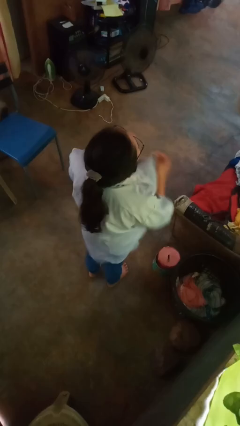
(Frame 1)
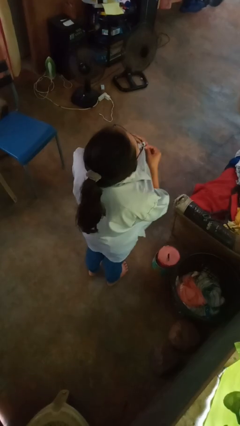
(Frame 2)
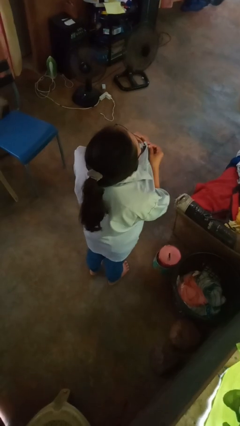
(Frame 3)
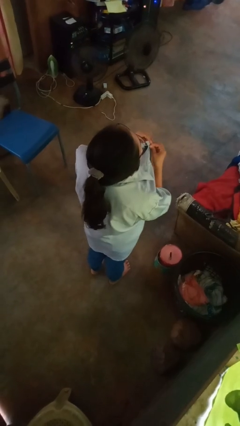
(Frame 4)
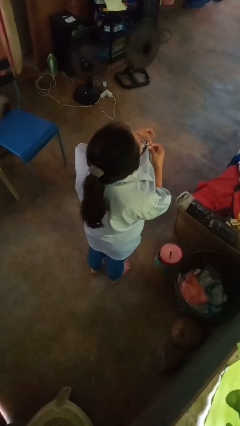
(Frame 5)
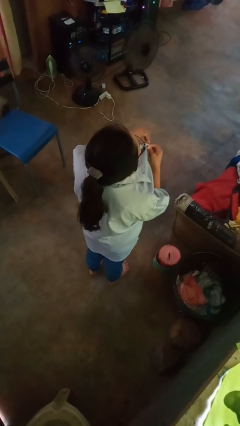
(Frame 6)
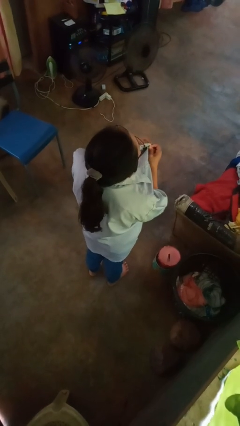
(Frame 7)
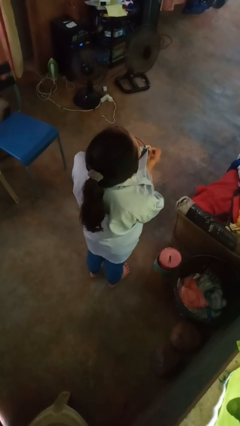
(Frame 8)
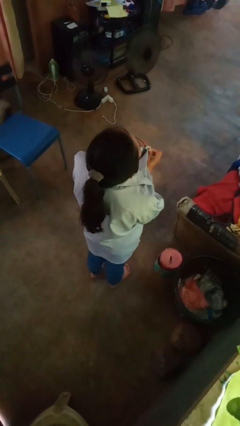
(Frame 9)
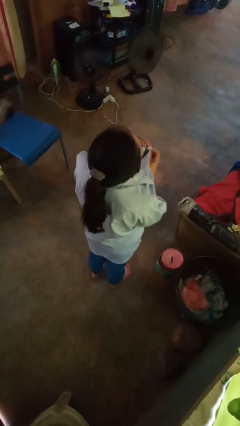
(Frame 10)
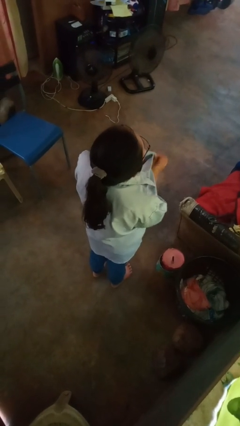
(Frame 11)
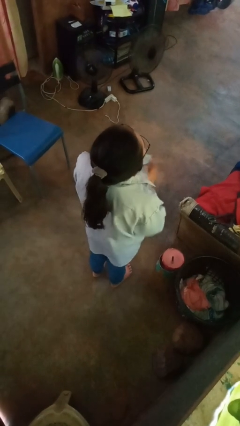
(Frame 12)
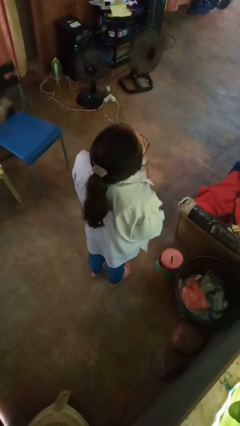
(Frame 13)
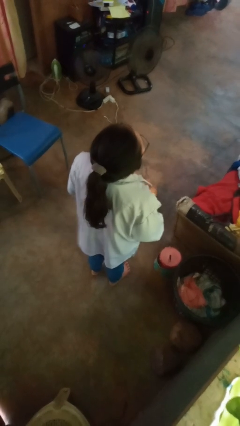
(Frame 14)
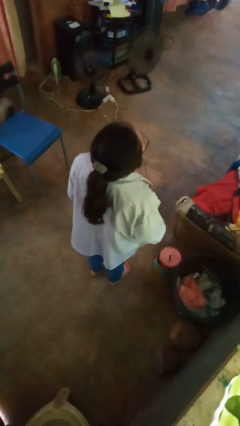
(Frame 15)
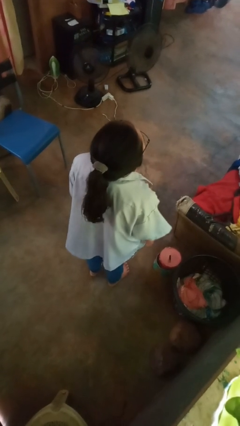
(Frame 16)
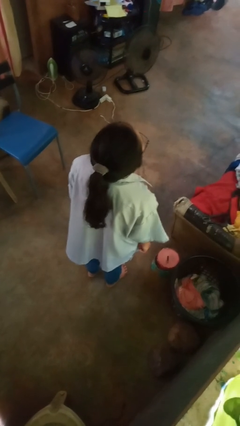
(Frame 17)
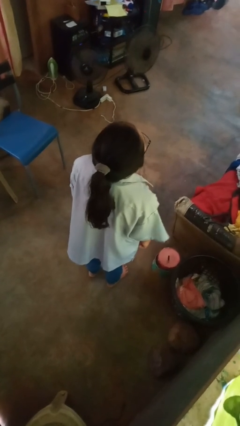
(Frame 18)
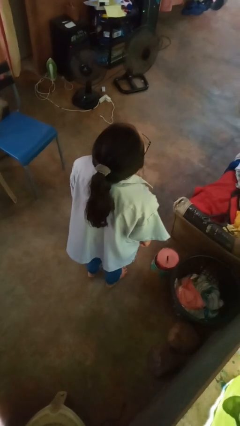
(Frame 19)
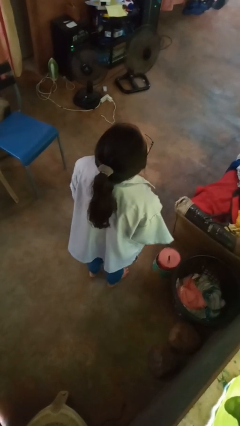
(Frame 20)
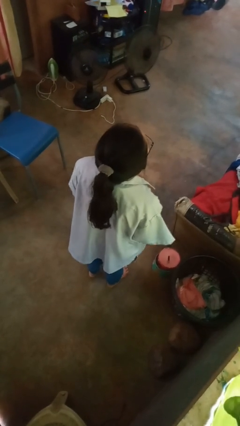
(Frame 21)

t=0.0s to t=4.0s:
person buttons shirt

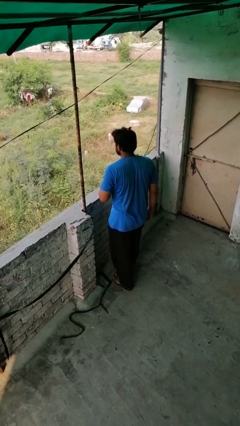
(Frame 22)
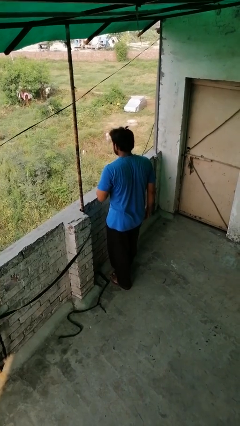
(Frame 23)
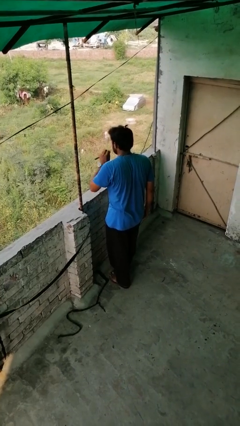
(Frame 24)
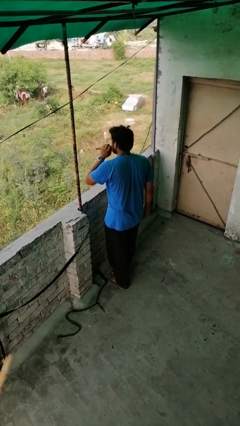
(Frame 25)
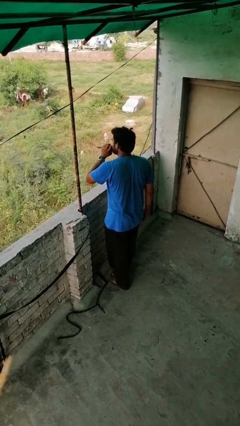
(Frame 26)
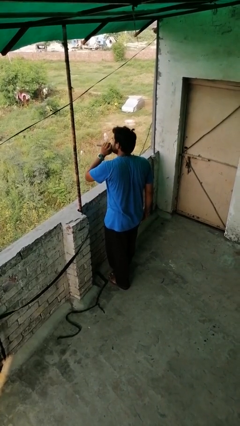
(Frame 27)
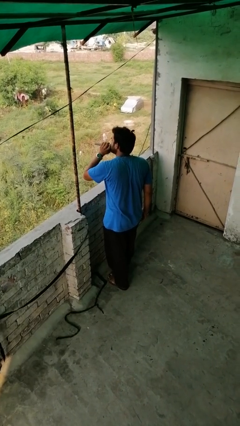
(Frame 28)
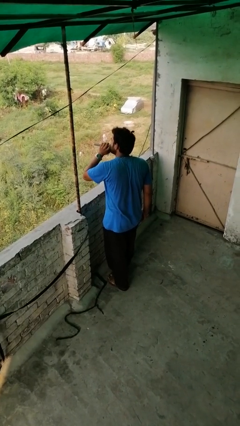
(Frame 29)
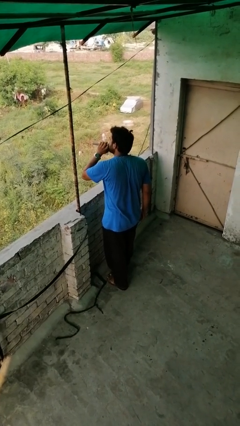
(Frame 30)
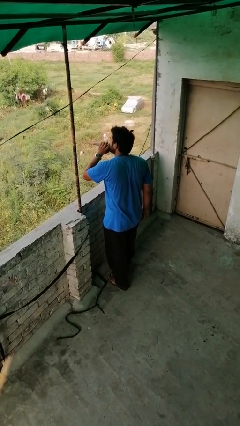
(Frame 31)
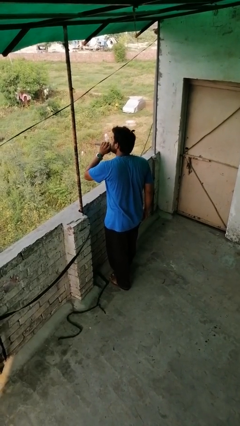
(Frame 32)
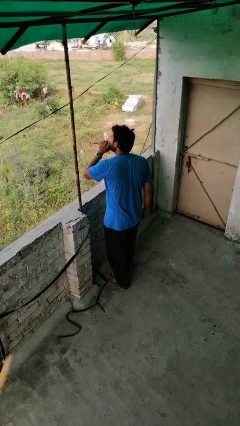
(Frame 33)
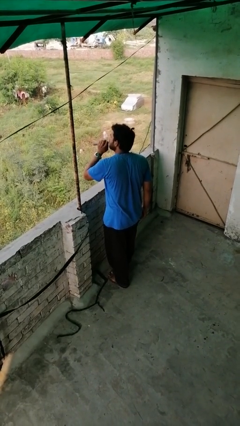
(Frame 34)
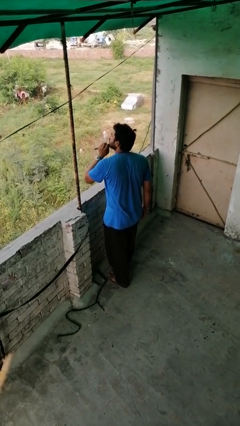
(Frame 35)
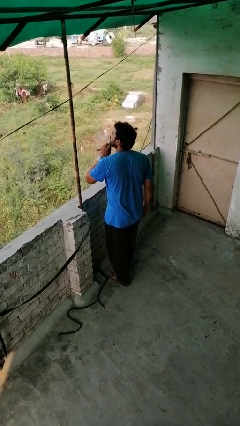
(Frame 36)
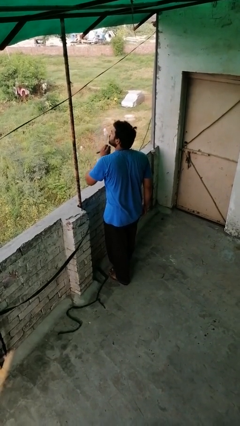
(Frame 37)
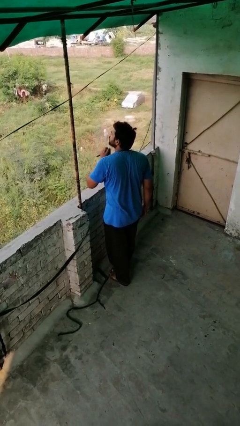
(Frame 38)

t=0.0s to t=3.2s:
person vapes

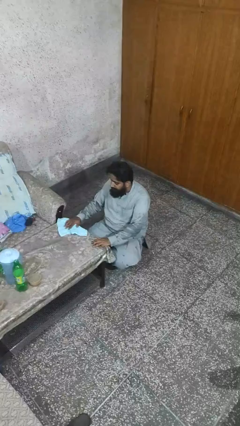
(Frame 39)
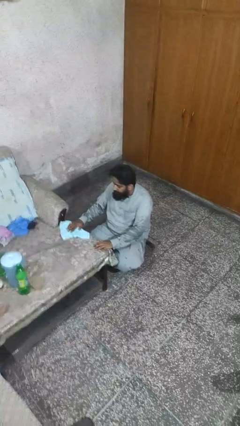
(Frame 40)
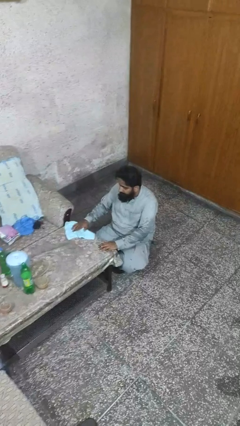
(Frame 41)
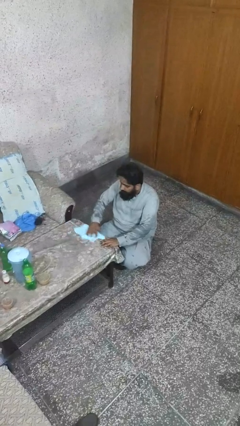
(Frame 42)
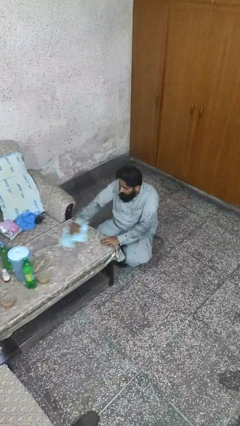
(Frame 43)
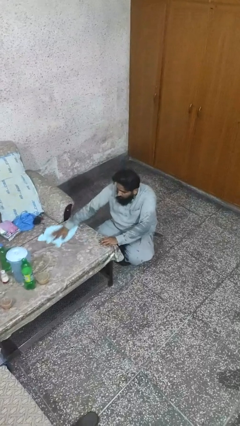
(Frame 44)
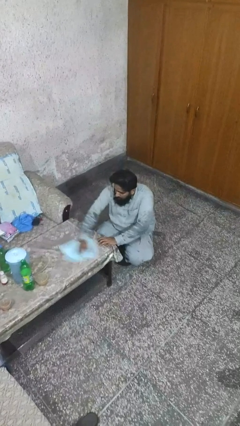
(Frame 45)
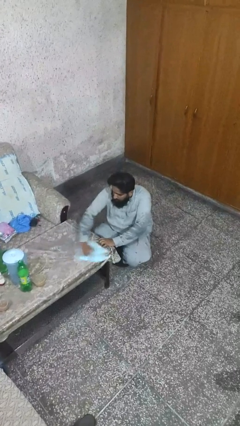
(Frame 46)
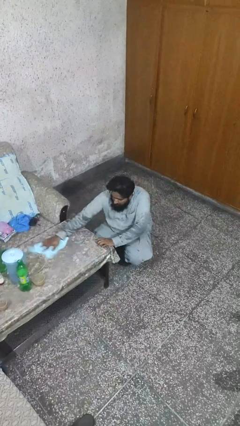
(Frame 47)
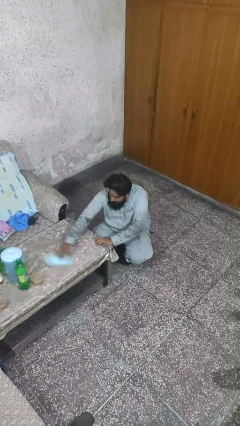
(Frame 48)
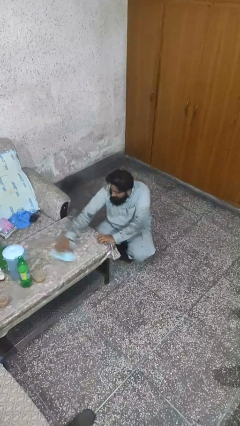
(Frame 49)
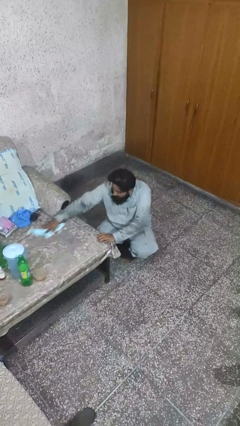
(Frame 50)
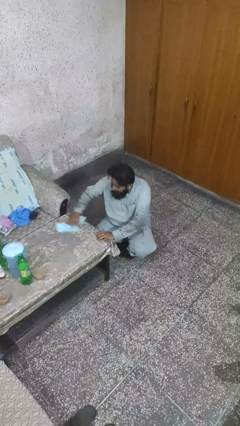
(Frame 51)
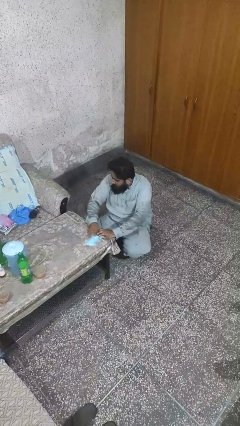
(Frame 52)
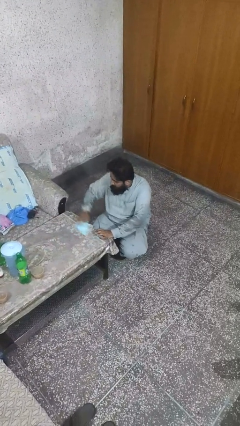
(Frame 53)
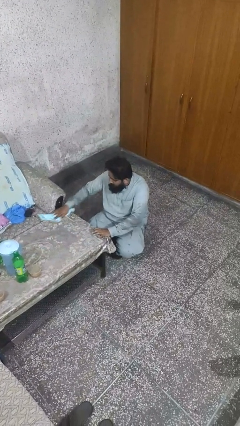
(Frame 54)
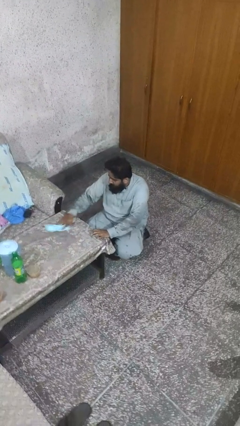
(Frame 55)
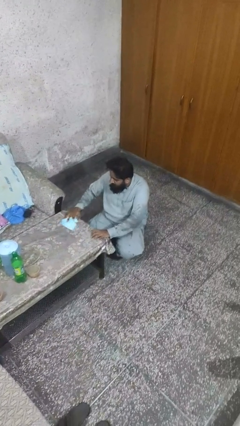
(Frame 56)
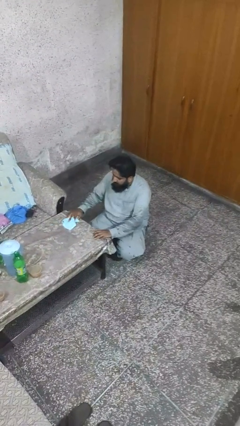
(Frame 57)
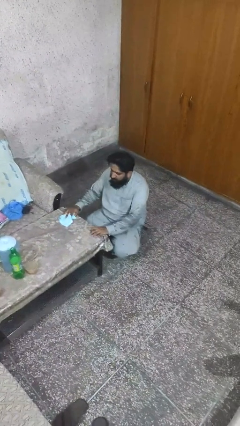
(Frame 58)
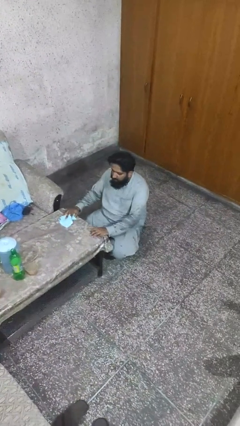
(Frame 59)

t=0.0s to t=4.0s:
person cleans table with rag

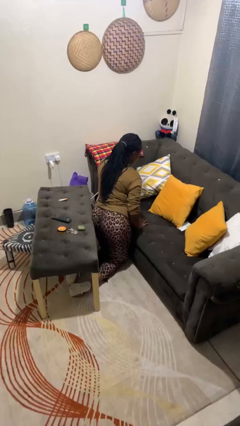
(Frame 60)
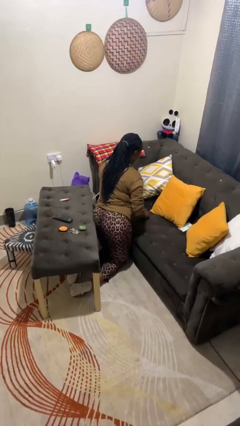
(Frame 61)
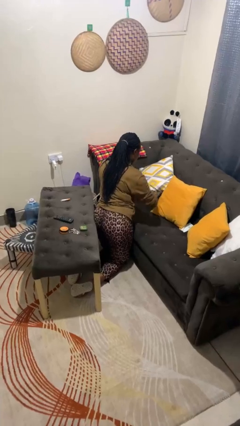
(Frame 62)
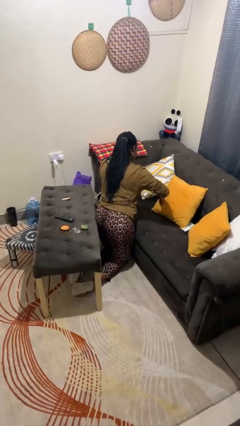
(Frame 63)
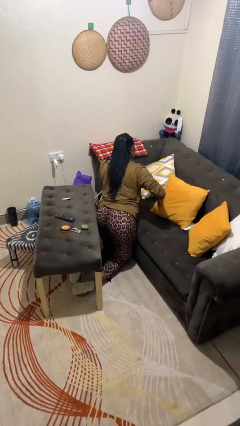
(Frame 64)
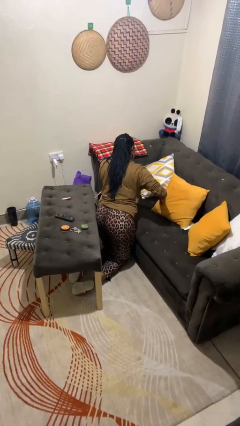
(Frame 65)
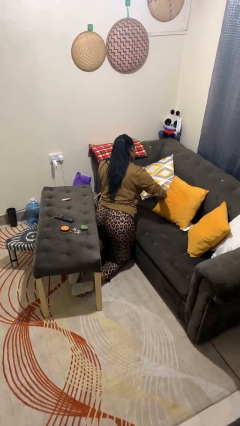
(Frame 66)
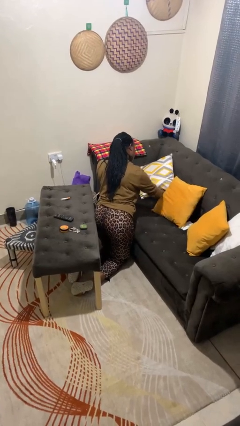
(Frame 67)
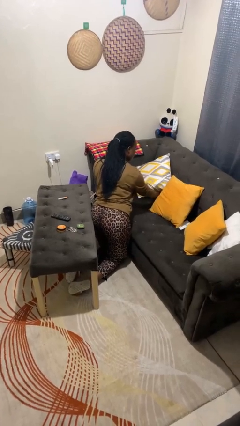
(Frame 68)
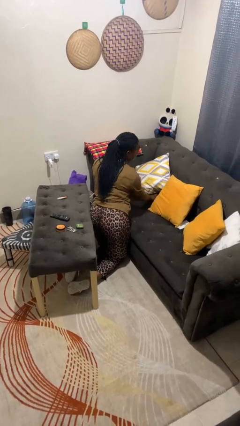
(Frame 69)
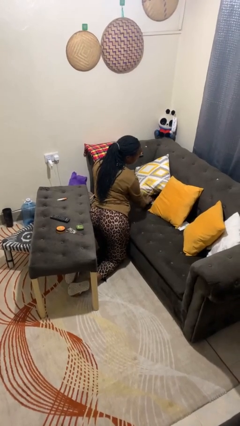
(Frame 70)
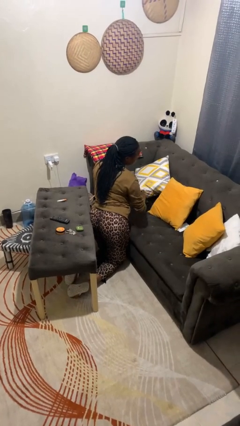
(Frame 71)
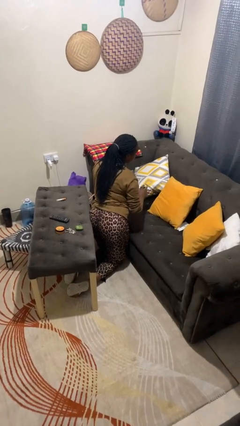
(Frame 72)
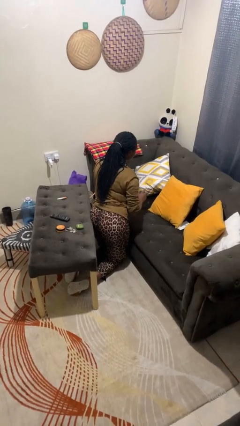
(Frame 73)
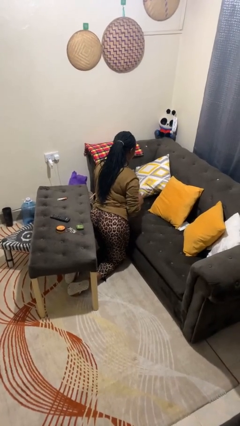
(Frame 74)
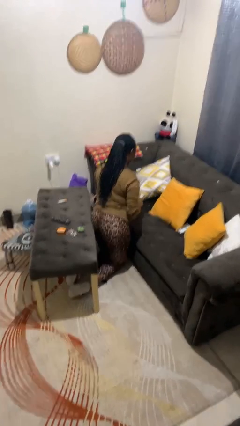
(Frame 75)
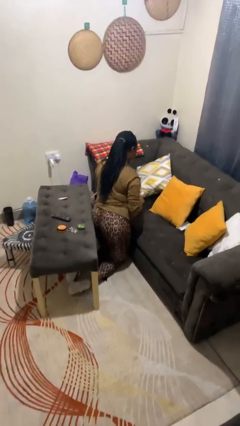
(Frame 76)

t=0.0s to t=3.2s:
person searches in couch

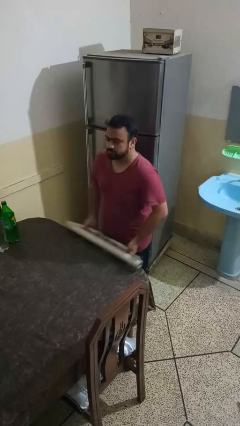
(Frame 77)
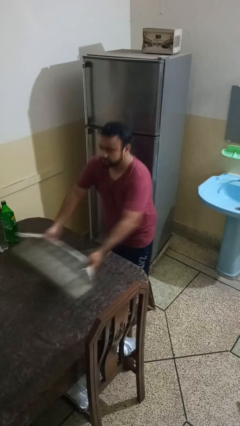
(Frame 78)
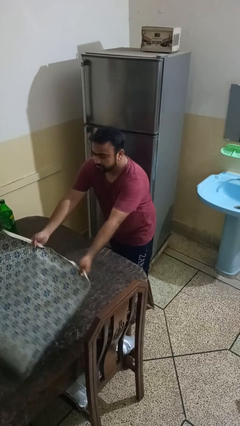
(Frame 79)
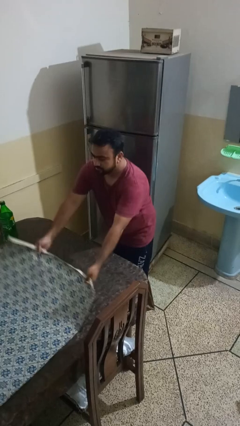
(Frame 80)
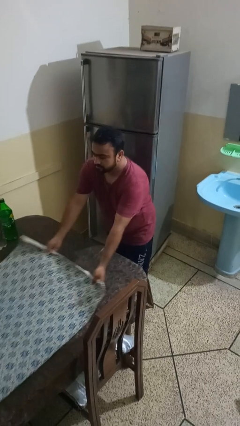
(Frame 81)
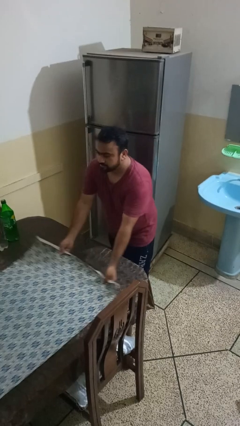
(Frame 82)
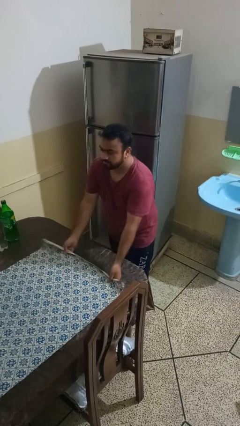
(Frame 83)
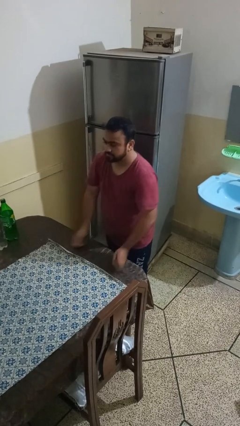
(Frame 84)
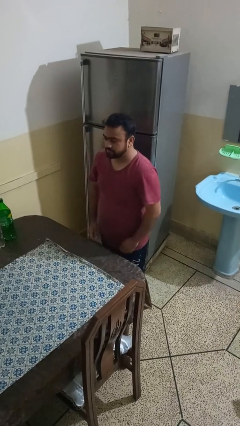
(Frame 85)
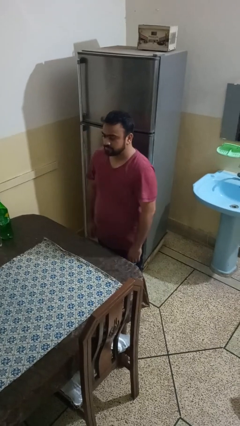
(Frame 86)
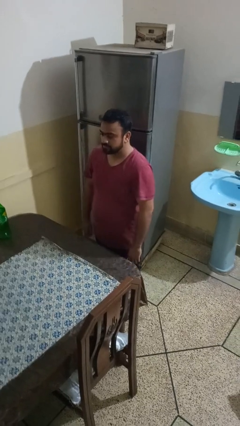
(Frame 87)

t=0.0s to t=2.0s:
person spreads tablecloth

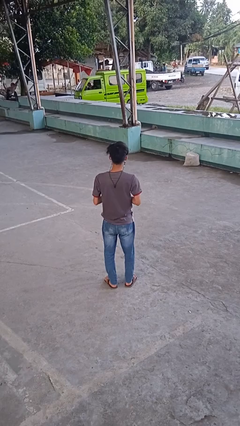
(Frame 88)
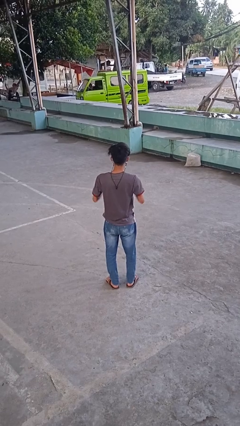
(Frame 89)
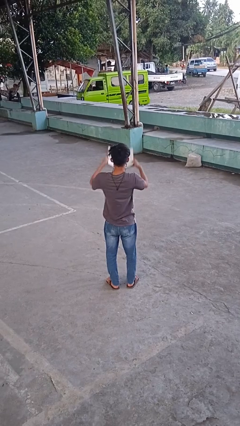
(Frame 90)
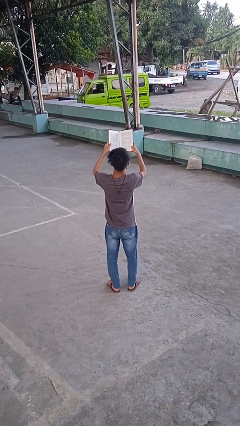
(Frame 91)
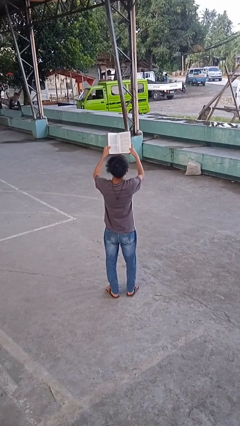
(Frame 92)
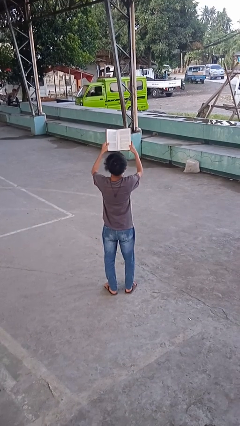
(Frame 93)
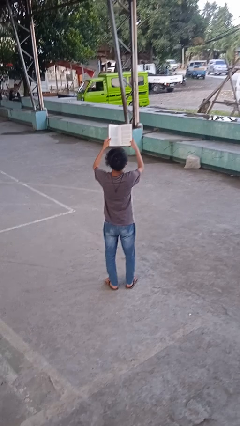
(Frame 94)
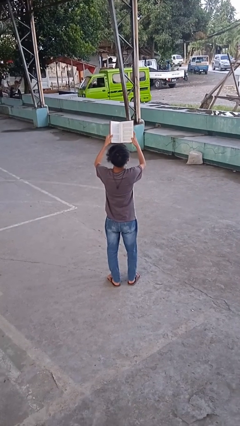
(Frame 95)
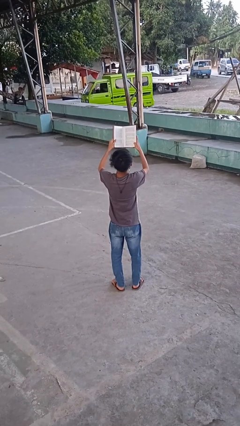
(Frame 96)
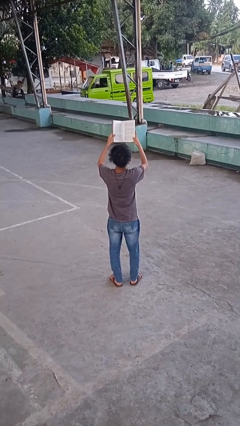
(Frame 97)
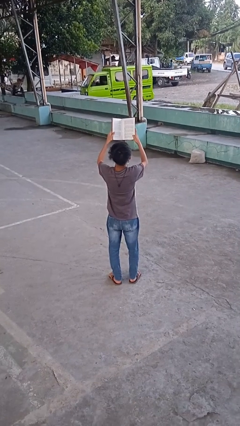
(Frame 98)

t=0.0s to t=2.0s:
person reads book
